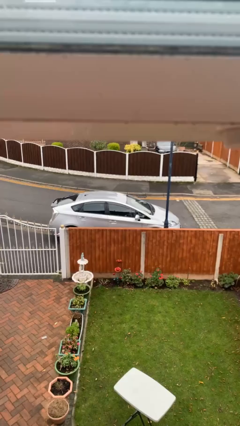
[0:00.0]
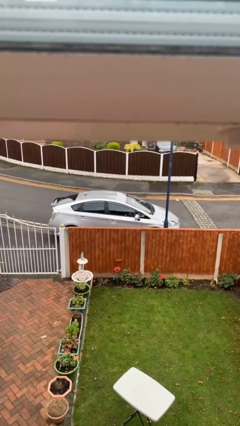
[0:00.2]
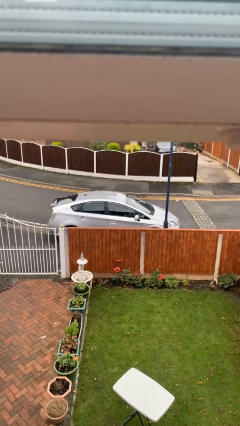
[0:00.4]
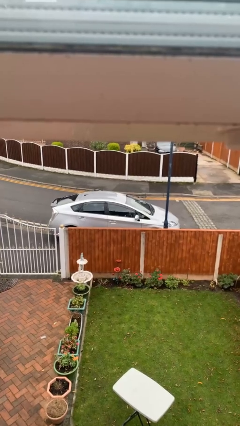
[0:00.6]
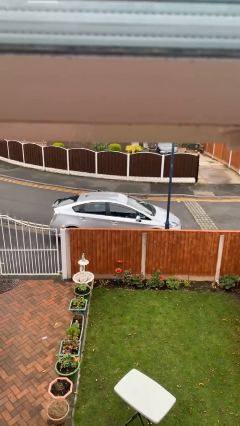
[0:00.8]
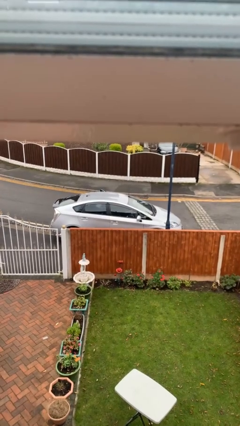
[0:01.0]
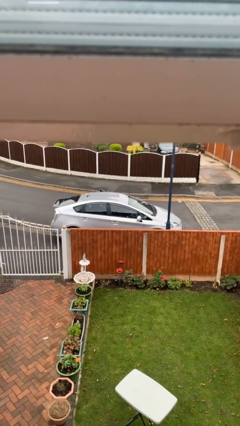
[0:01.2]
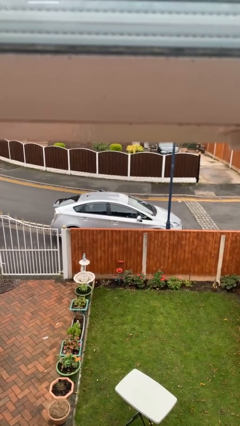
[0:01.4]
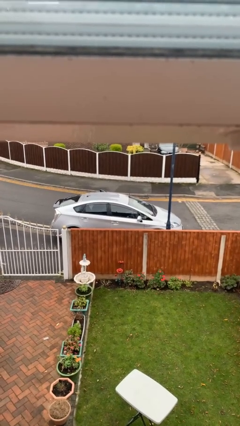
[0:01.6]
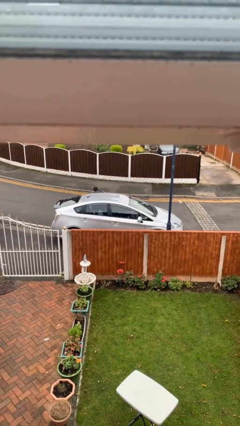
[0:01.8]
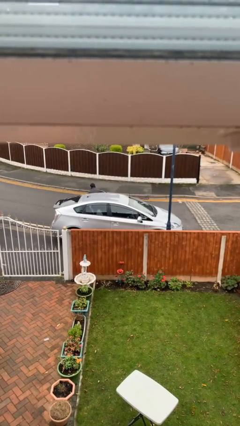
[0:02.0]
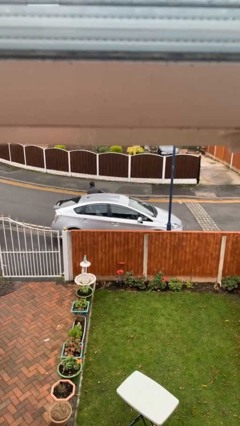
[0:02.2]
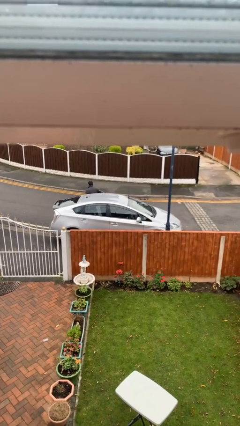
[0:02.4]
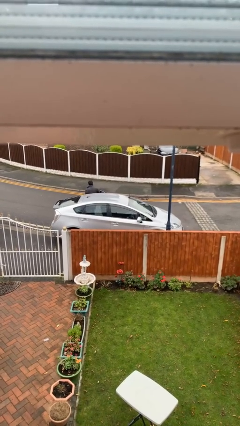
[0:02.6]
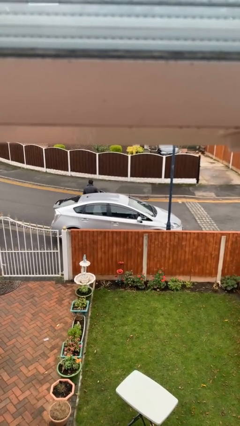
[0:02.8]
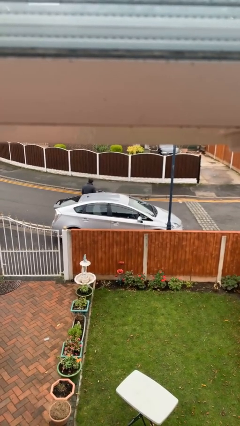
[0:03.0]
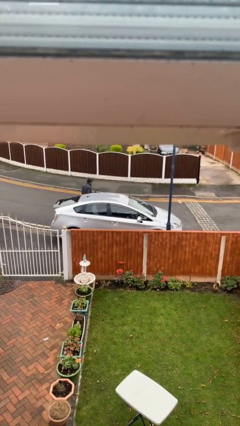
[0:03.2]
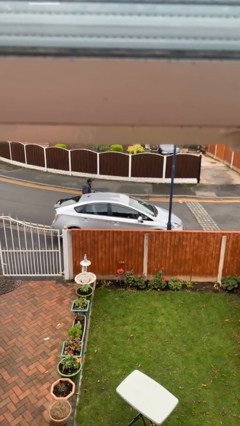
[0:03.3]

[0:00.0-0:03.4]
car drops off person

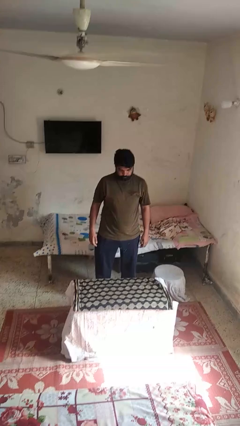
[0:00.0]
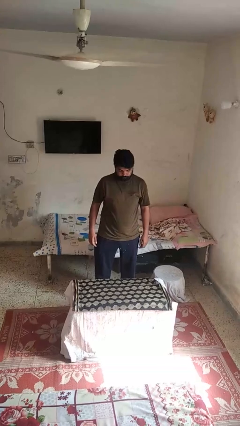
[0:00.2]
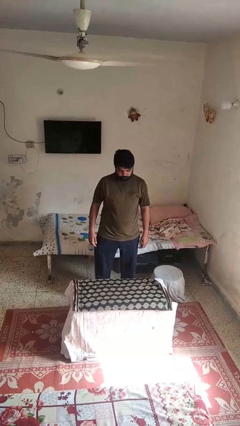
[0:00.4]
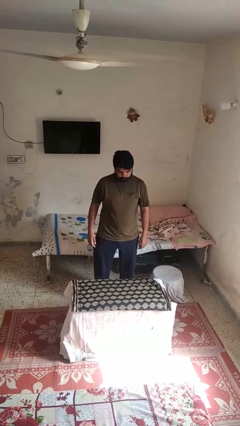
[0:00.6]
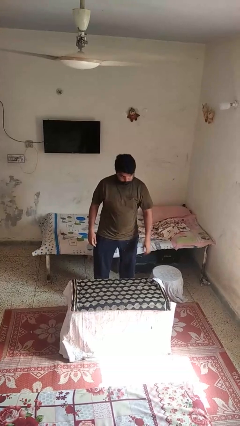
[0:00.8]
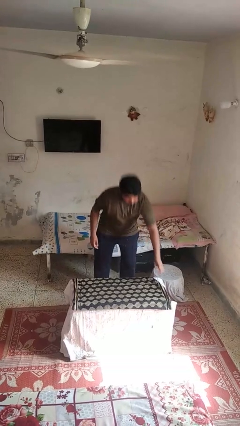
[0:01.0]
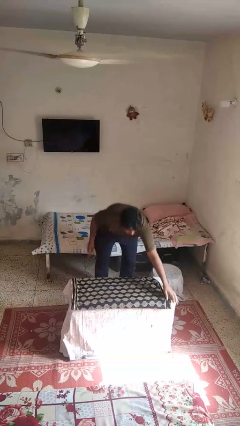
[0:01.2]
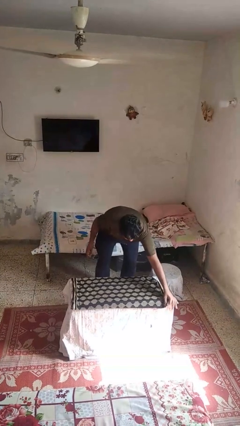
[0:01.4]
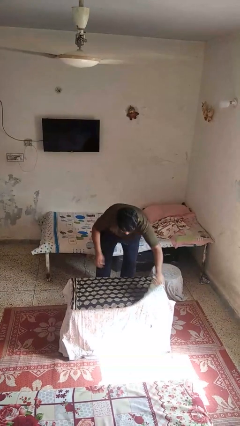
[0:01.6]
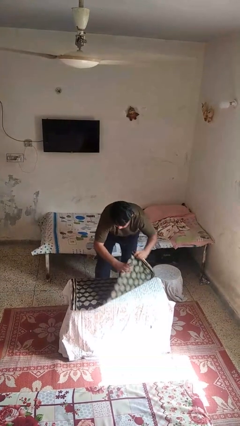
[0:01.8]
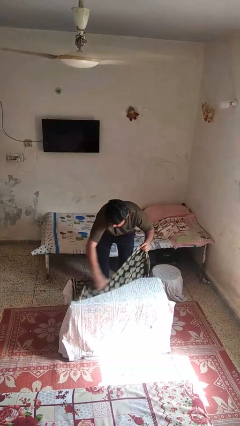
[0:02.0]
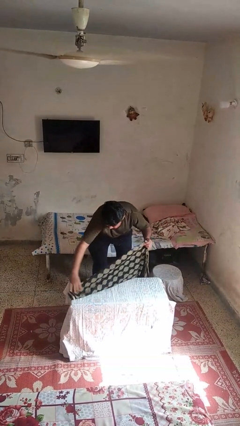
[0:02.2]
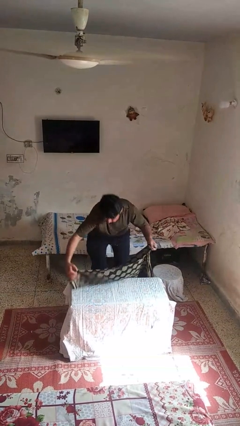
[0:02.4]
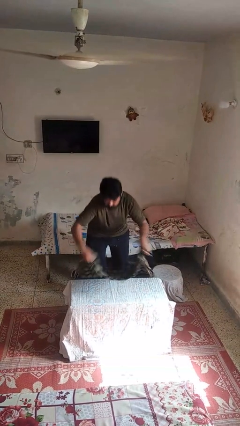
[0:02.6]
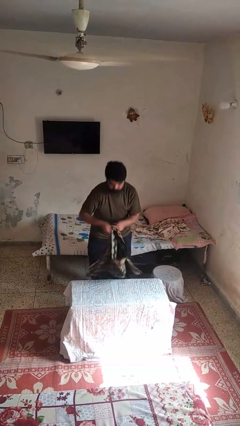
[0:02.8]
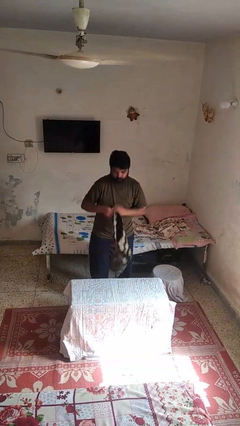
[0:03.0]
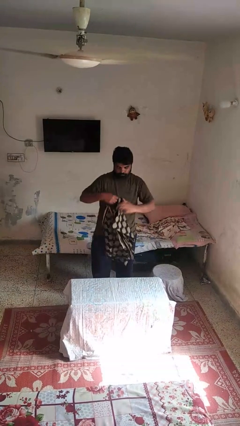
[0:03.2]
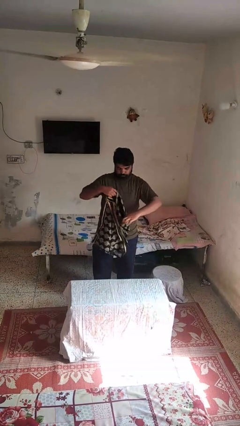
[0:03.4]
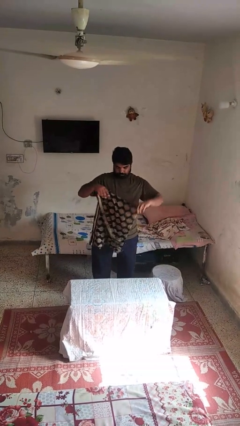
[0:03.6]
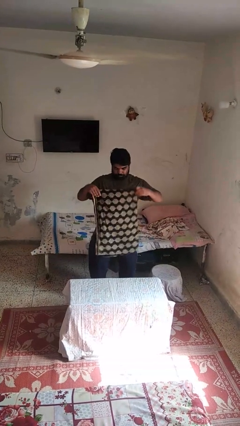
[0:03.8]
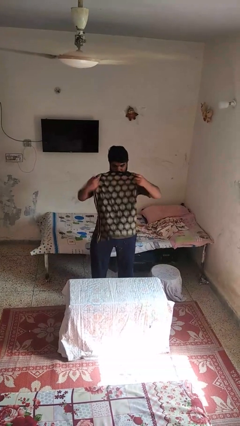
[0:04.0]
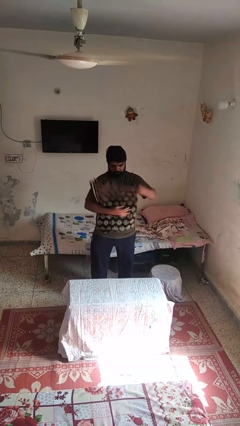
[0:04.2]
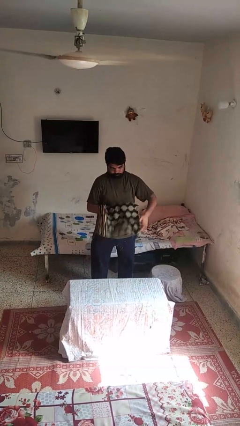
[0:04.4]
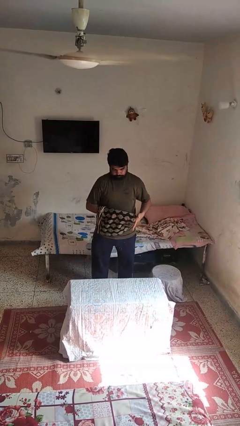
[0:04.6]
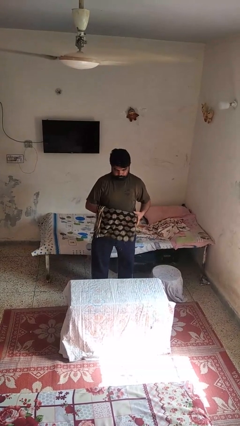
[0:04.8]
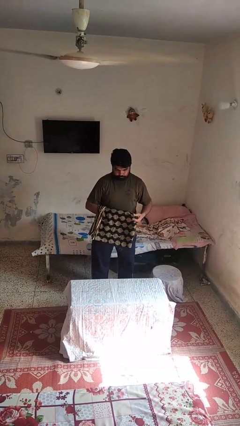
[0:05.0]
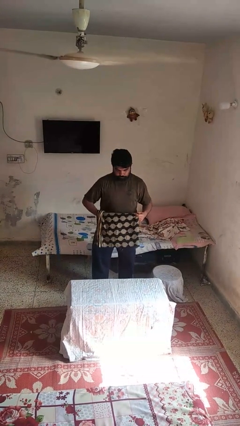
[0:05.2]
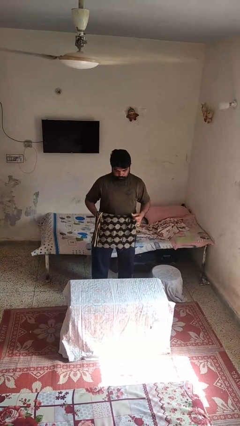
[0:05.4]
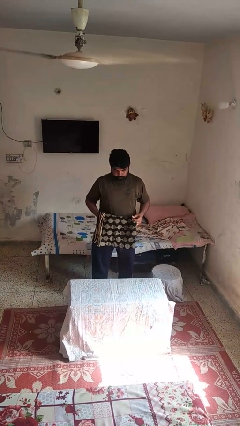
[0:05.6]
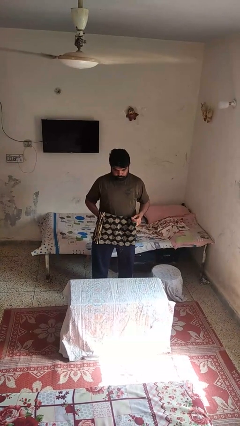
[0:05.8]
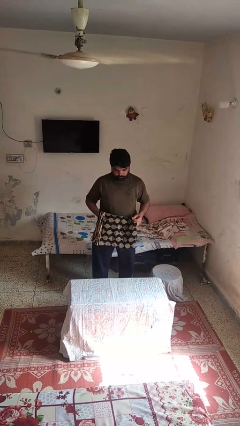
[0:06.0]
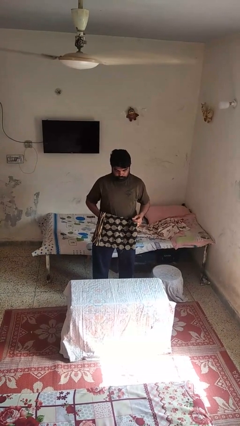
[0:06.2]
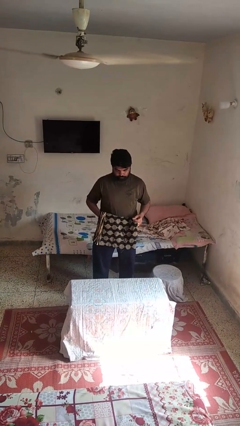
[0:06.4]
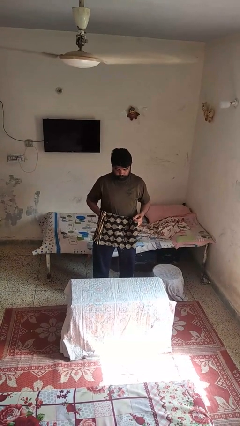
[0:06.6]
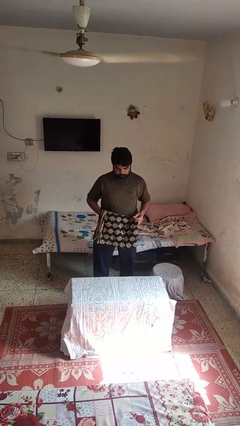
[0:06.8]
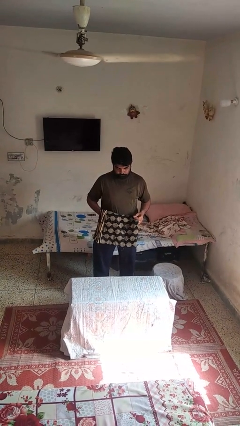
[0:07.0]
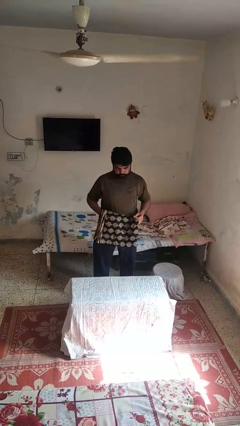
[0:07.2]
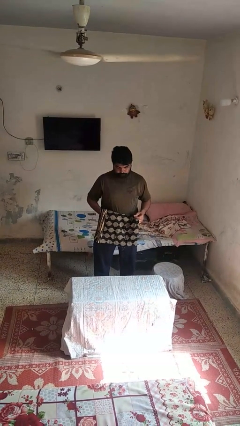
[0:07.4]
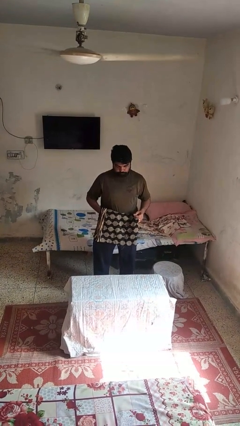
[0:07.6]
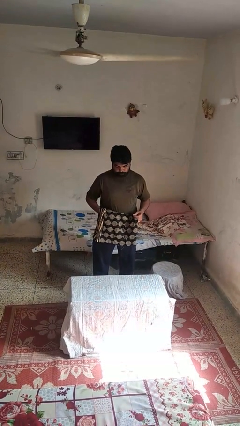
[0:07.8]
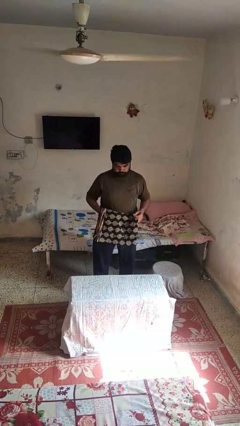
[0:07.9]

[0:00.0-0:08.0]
person folds tablecloth

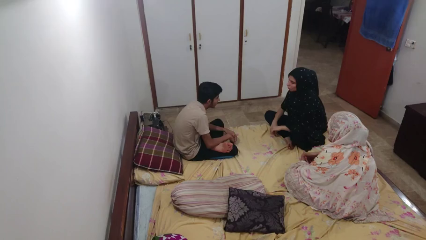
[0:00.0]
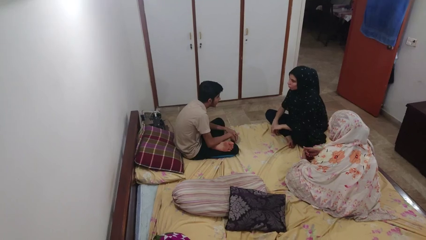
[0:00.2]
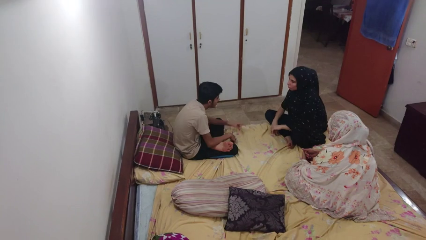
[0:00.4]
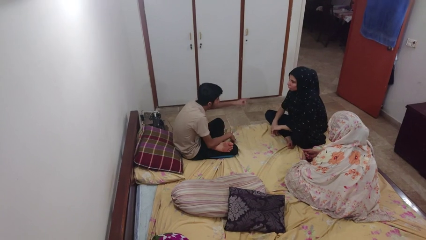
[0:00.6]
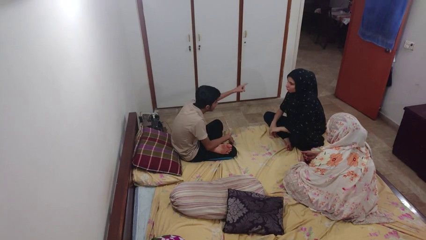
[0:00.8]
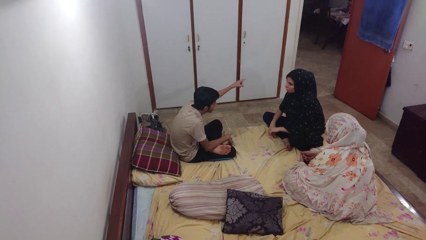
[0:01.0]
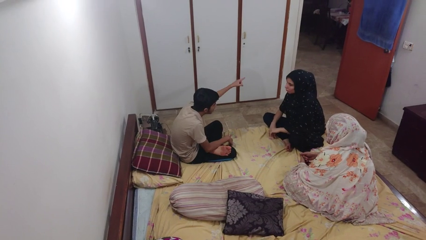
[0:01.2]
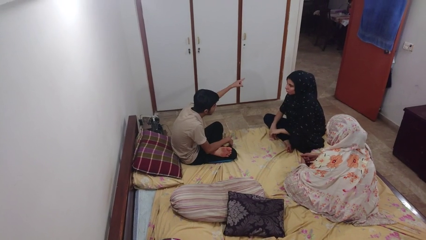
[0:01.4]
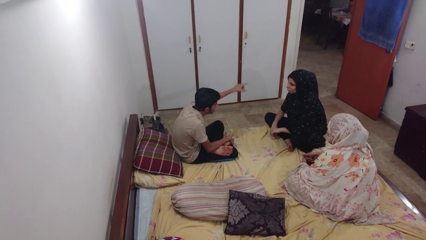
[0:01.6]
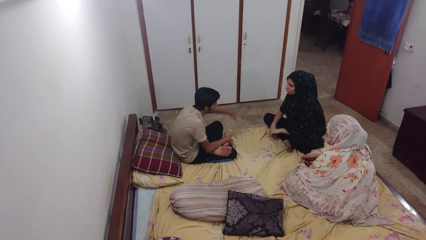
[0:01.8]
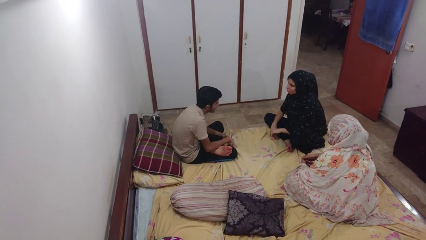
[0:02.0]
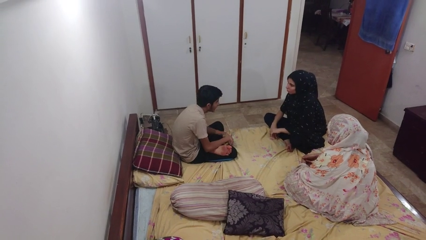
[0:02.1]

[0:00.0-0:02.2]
person points at person

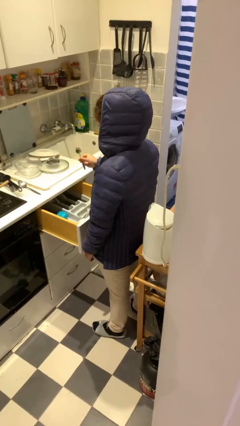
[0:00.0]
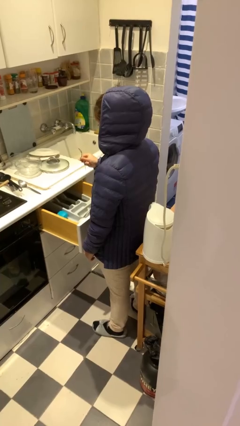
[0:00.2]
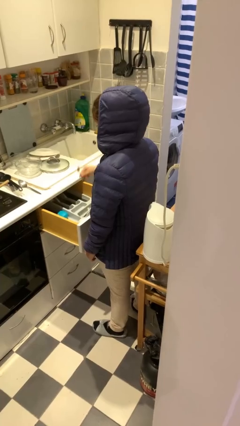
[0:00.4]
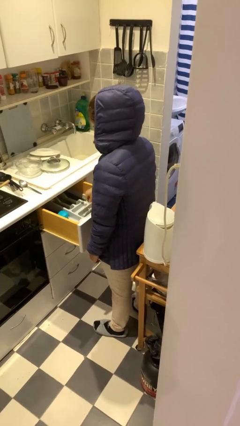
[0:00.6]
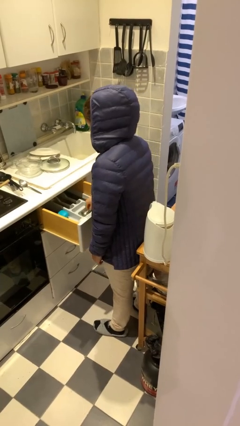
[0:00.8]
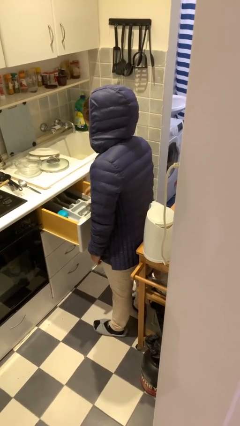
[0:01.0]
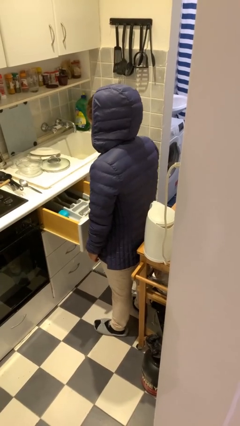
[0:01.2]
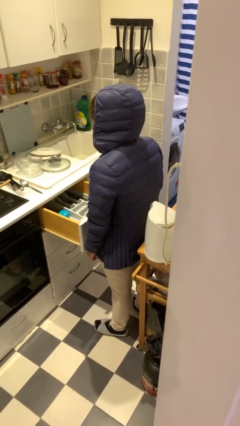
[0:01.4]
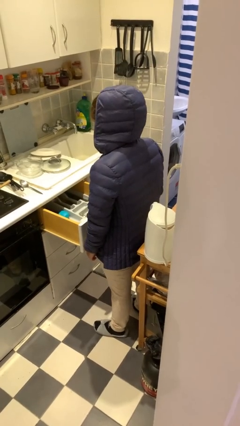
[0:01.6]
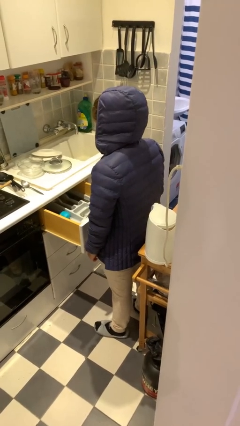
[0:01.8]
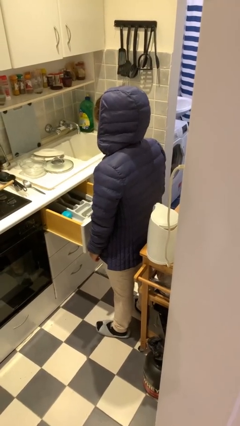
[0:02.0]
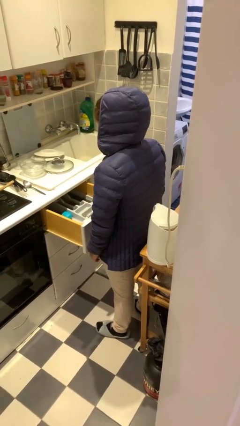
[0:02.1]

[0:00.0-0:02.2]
person puts object into kitchen drawer

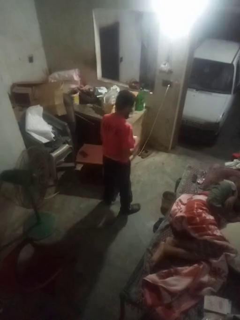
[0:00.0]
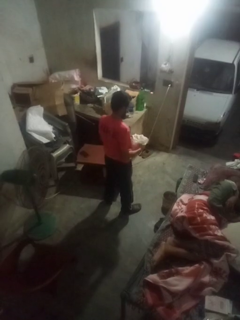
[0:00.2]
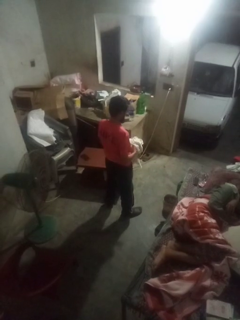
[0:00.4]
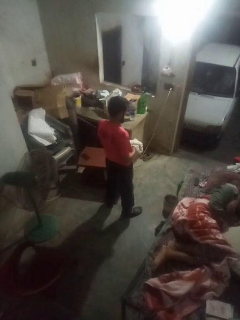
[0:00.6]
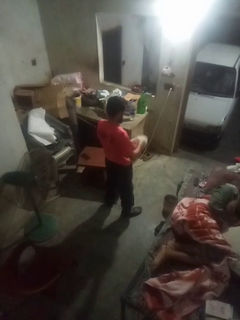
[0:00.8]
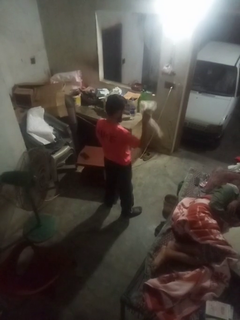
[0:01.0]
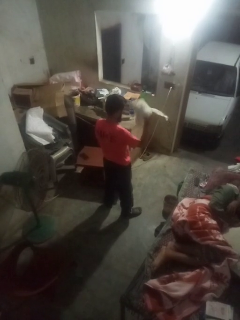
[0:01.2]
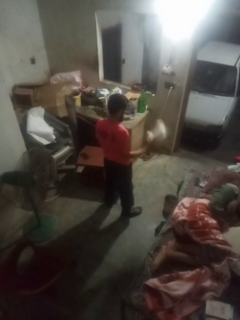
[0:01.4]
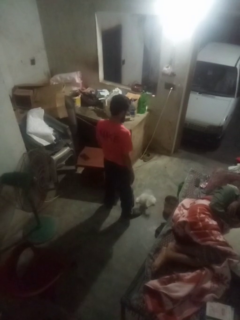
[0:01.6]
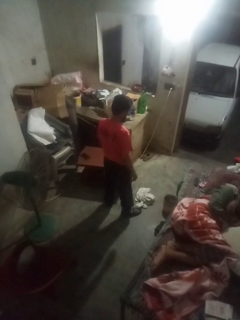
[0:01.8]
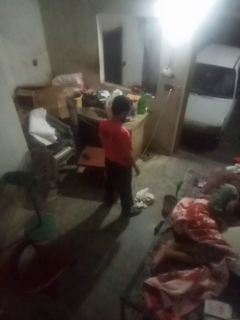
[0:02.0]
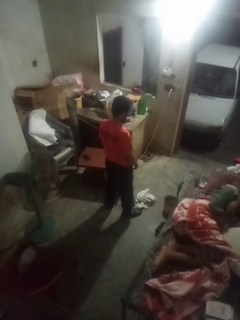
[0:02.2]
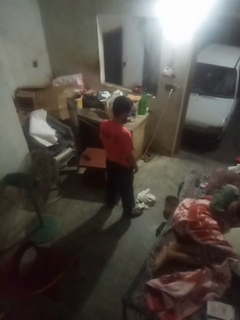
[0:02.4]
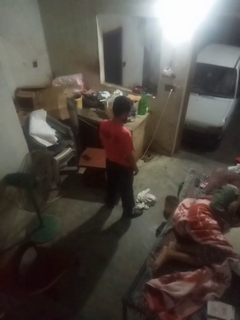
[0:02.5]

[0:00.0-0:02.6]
person throws object to ground
